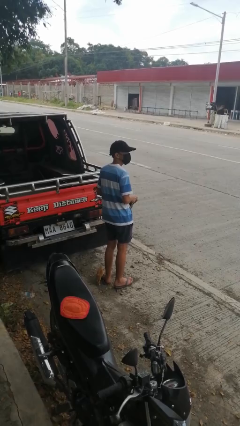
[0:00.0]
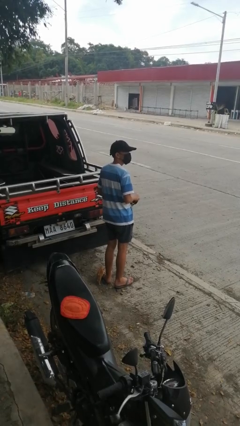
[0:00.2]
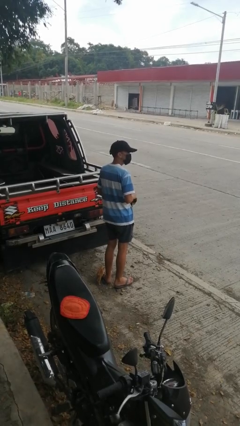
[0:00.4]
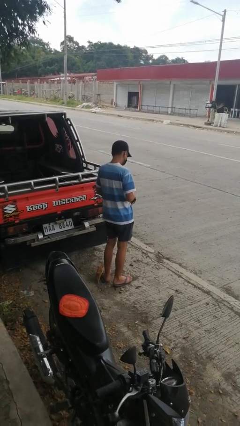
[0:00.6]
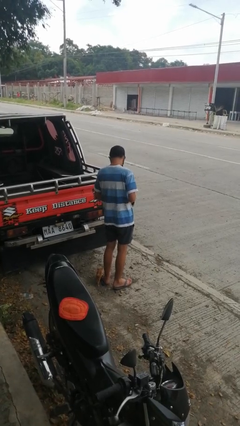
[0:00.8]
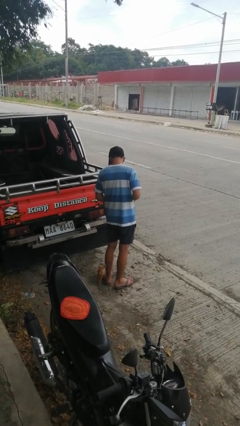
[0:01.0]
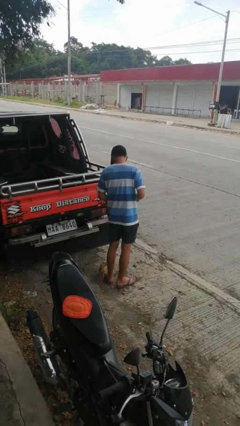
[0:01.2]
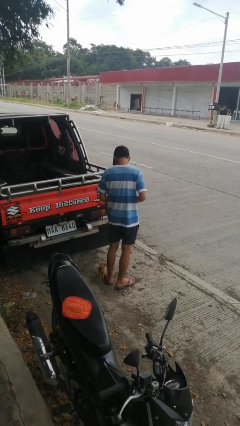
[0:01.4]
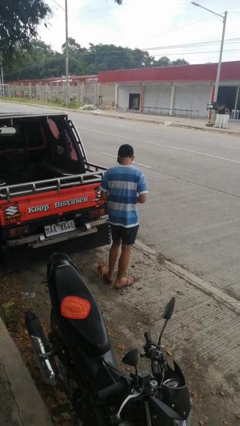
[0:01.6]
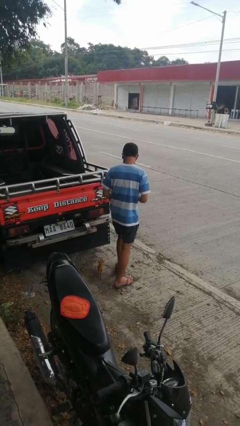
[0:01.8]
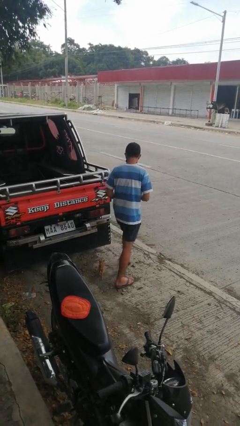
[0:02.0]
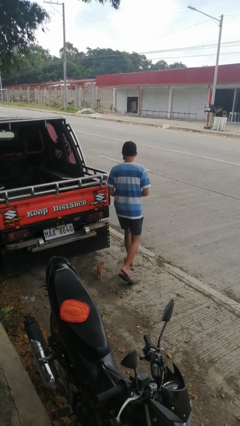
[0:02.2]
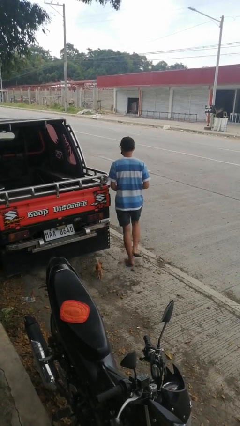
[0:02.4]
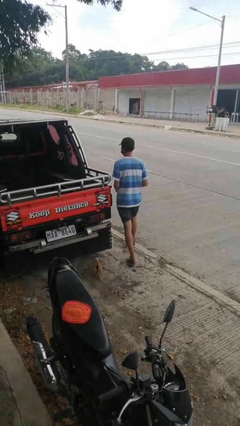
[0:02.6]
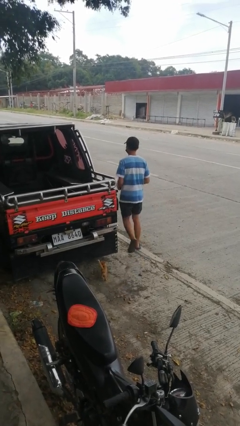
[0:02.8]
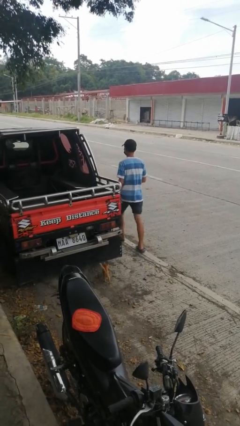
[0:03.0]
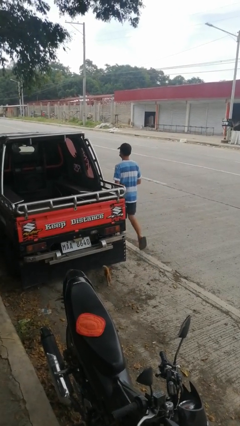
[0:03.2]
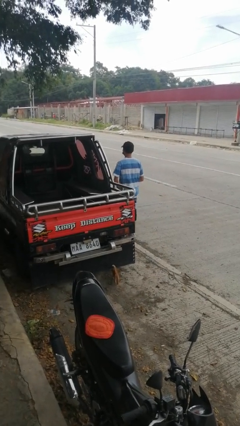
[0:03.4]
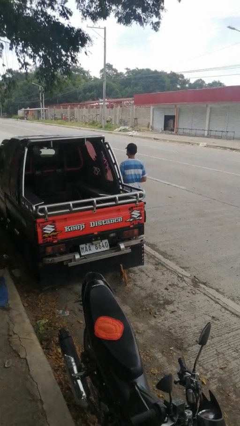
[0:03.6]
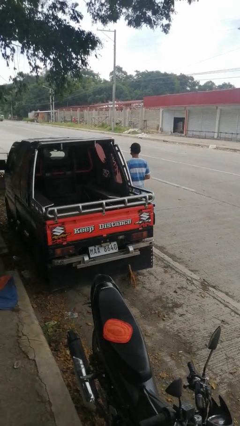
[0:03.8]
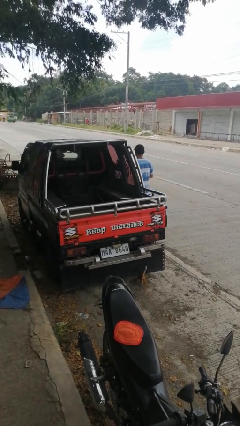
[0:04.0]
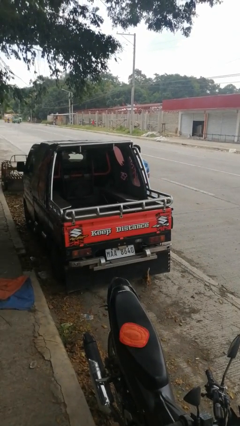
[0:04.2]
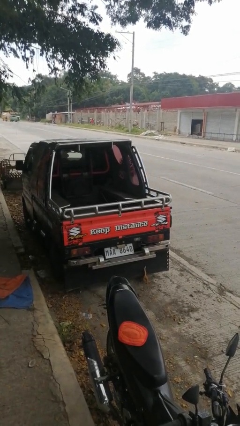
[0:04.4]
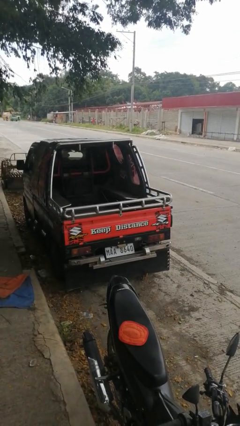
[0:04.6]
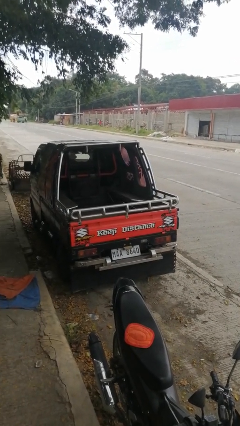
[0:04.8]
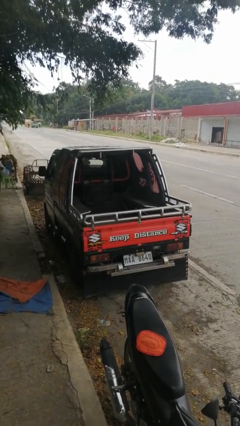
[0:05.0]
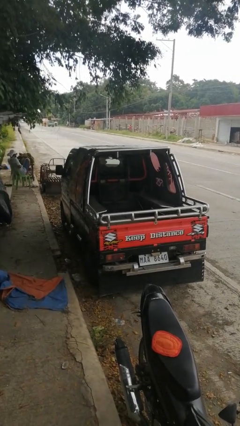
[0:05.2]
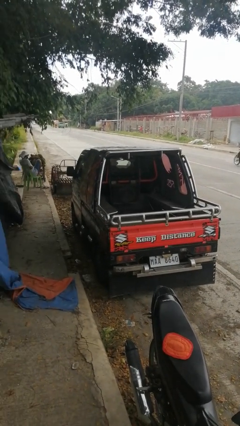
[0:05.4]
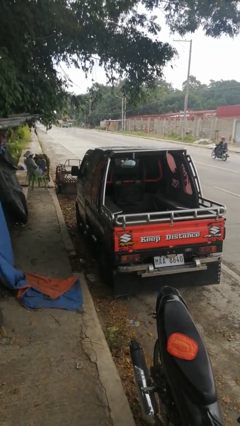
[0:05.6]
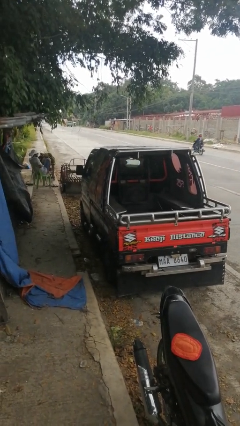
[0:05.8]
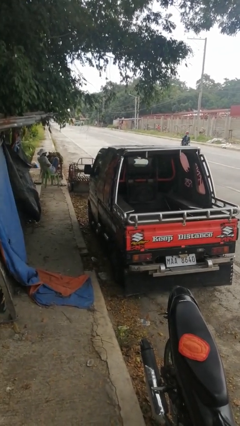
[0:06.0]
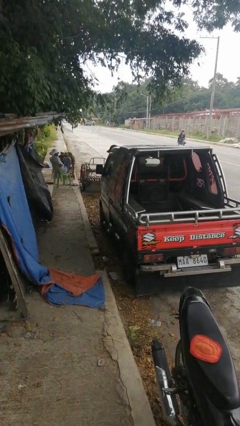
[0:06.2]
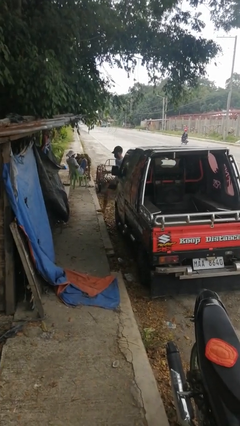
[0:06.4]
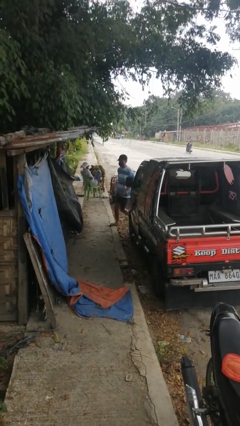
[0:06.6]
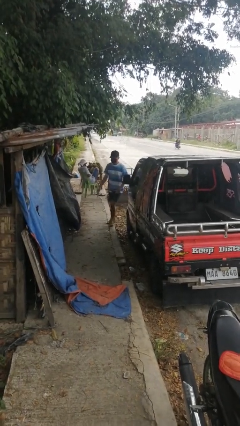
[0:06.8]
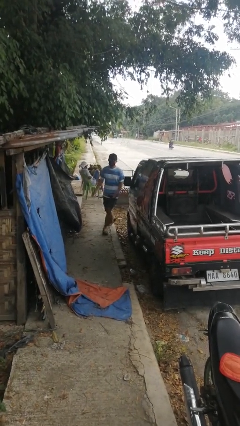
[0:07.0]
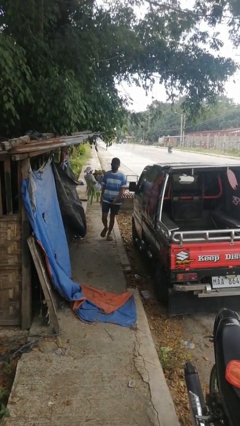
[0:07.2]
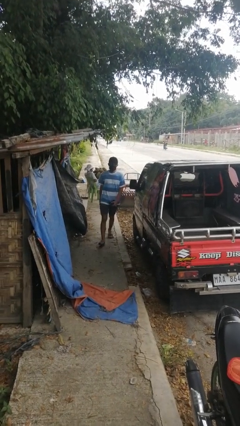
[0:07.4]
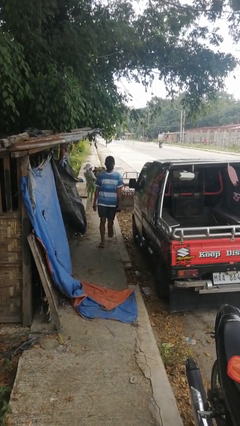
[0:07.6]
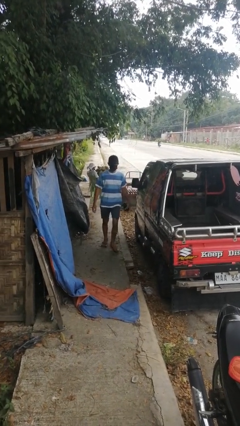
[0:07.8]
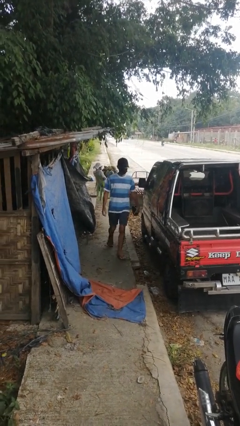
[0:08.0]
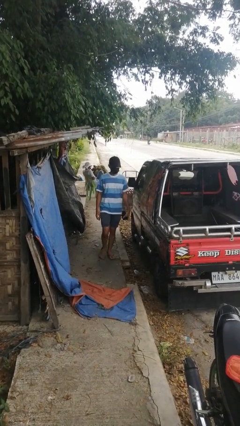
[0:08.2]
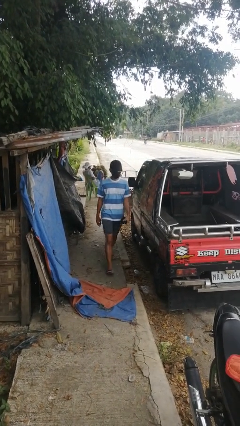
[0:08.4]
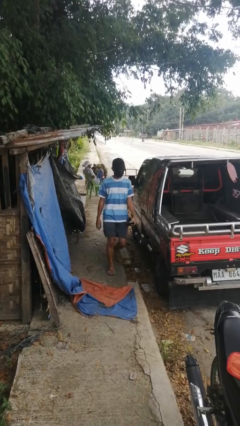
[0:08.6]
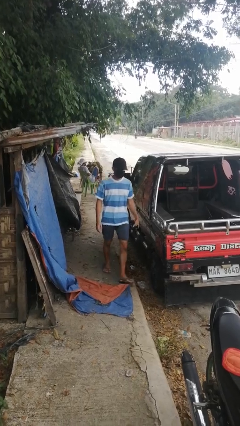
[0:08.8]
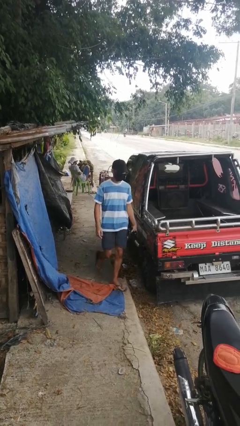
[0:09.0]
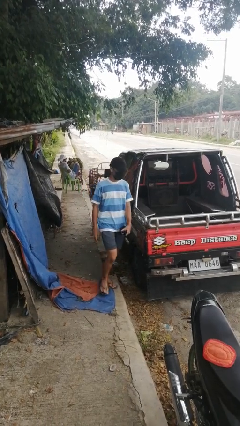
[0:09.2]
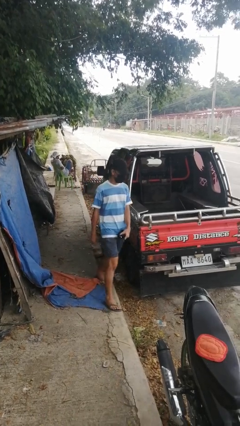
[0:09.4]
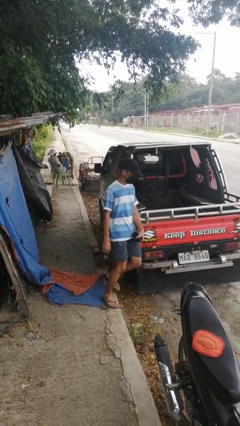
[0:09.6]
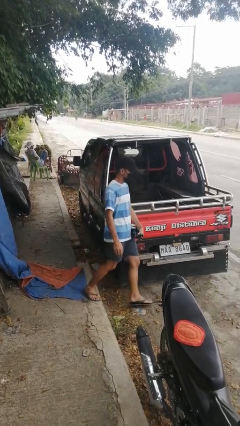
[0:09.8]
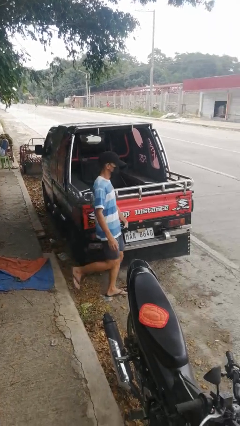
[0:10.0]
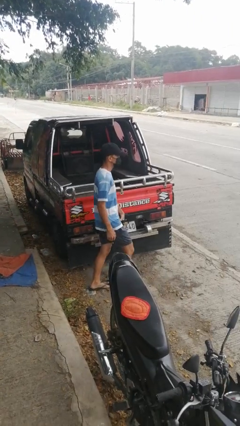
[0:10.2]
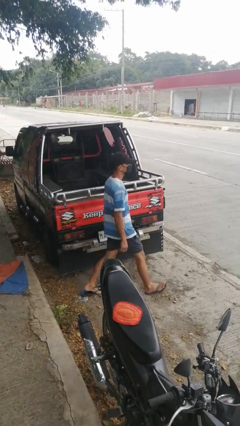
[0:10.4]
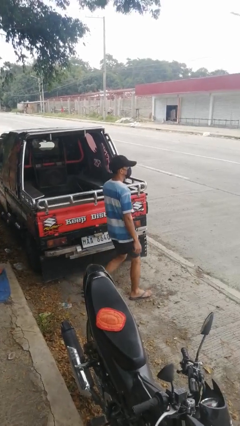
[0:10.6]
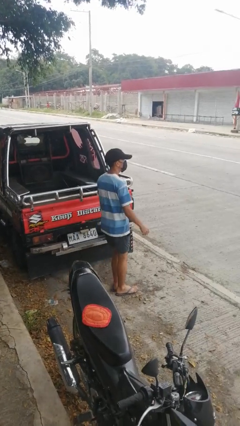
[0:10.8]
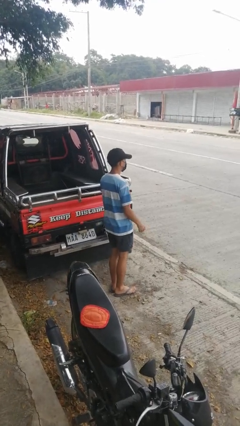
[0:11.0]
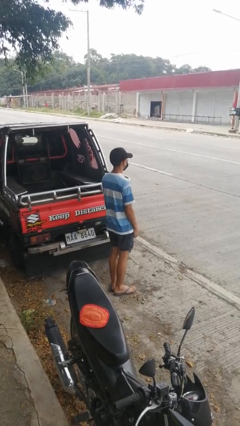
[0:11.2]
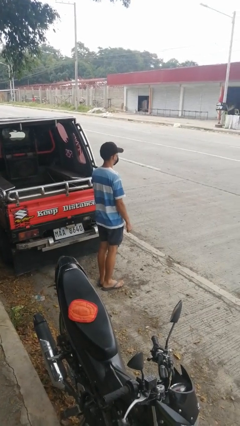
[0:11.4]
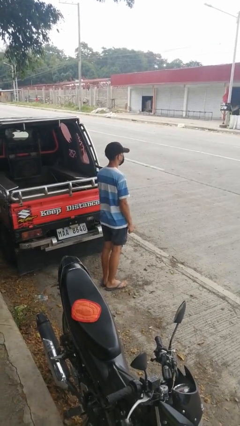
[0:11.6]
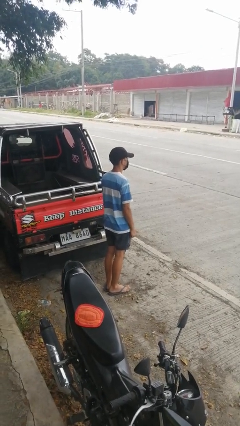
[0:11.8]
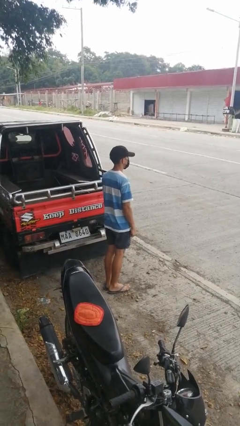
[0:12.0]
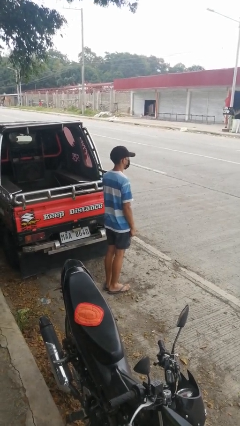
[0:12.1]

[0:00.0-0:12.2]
person walks around car

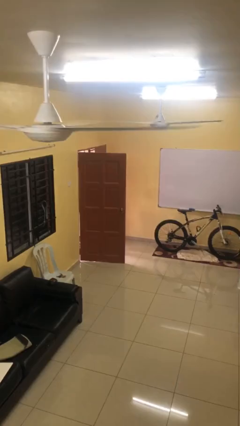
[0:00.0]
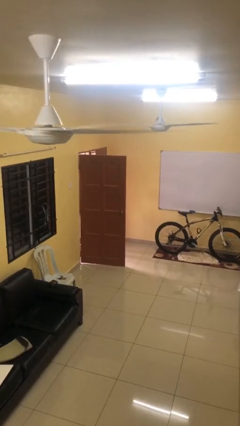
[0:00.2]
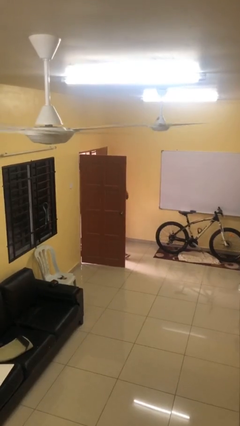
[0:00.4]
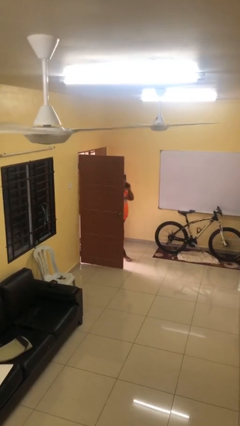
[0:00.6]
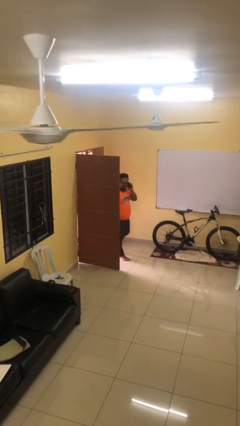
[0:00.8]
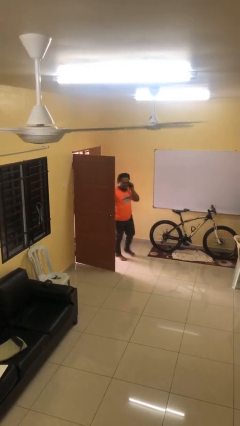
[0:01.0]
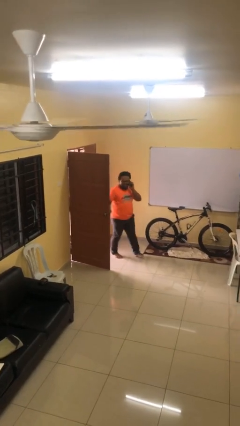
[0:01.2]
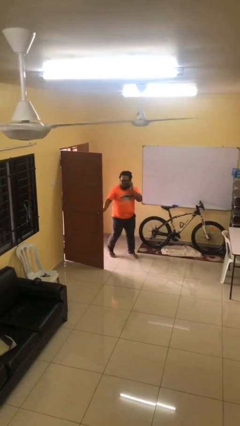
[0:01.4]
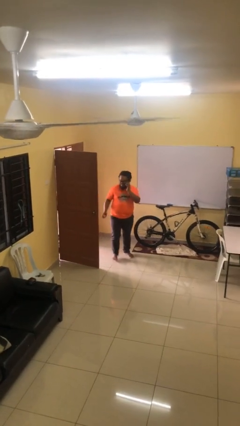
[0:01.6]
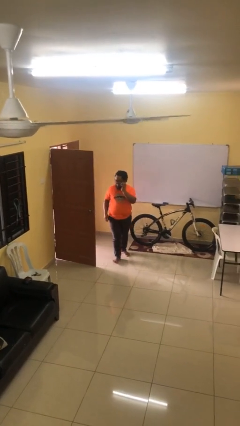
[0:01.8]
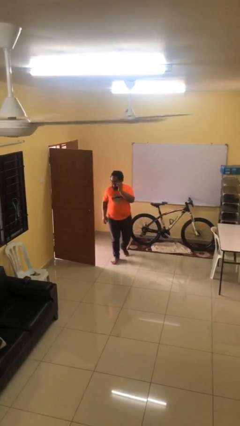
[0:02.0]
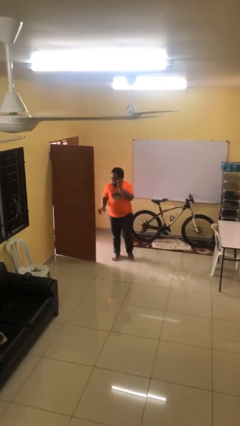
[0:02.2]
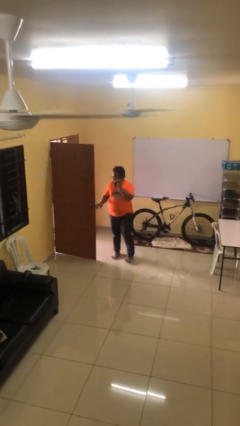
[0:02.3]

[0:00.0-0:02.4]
person enters scene through structure

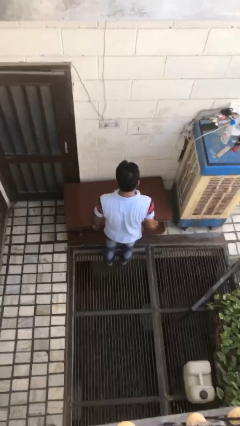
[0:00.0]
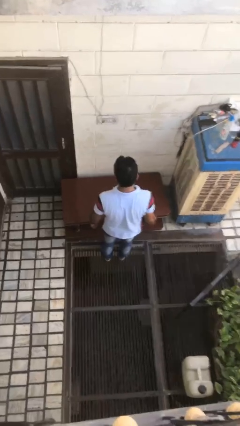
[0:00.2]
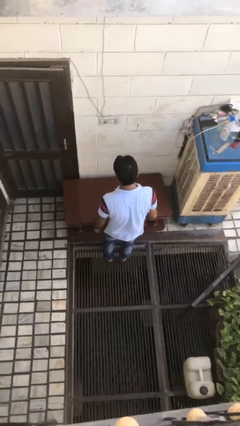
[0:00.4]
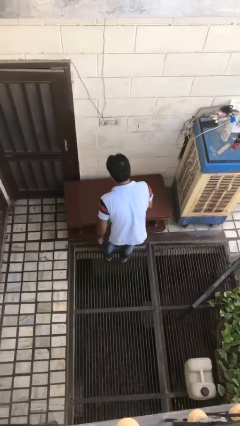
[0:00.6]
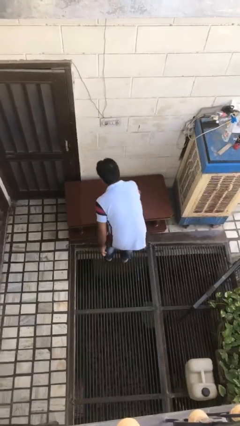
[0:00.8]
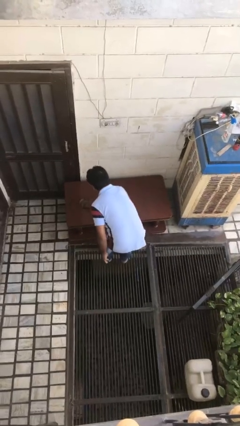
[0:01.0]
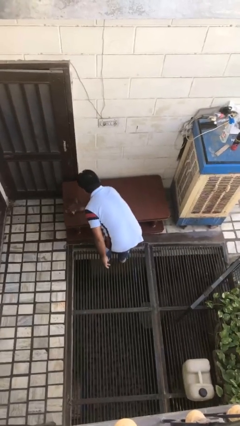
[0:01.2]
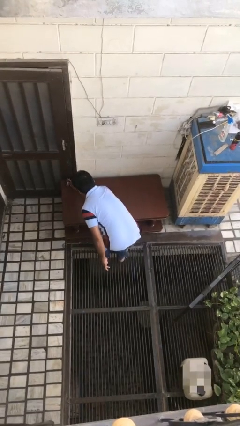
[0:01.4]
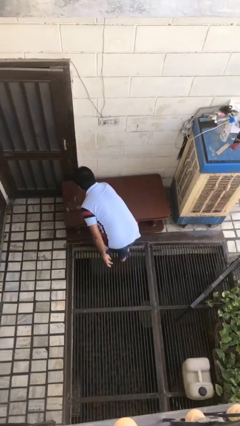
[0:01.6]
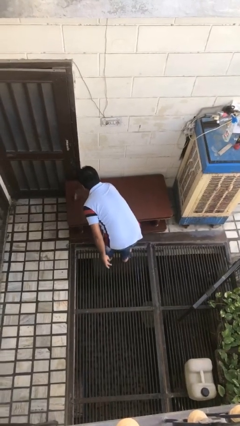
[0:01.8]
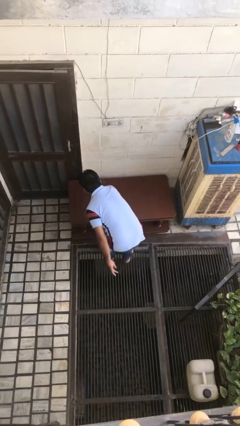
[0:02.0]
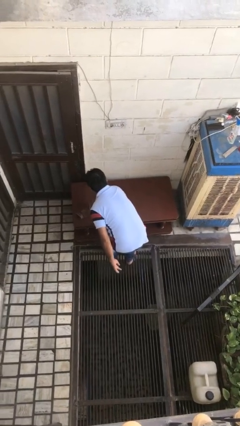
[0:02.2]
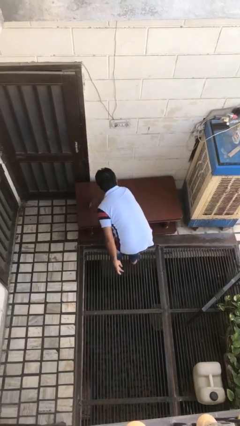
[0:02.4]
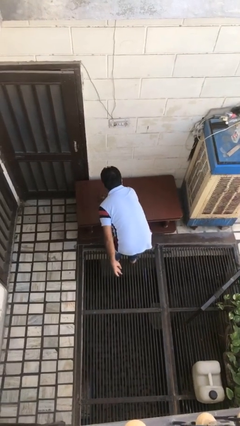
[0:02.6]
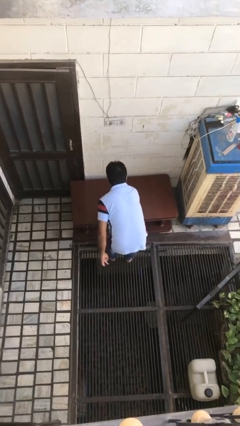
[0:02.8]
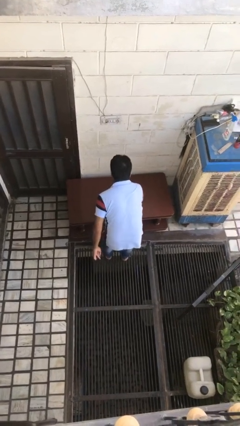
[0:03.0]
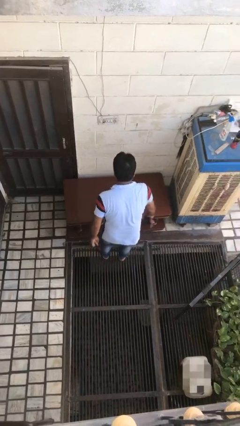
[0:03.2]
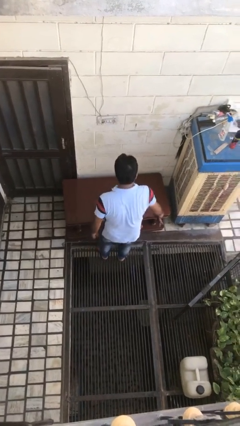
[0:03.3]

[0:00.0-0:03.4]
person cleans table with rag

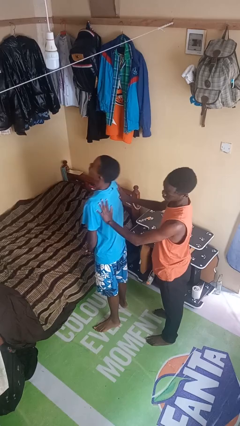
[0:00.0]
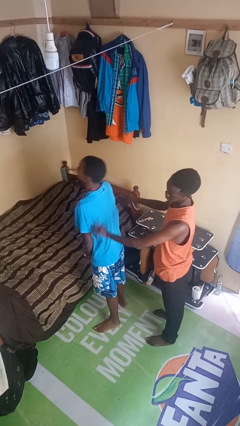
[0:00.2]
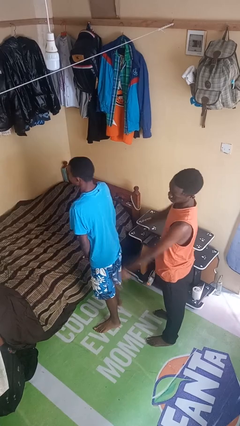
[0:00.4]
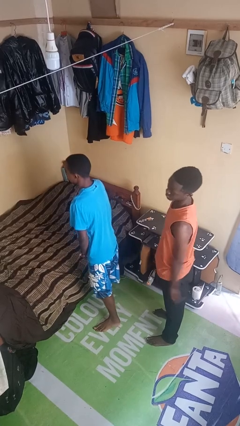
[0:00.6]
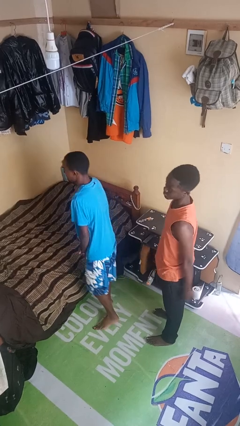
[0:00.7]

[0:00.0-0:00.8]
person shoves person
